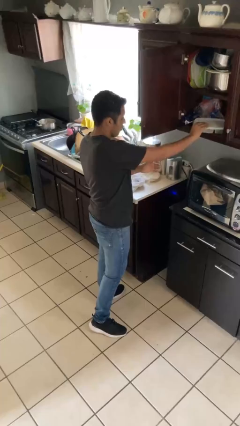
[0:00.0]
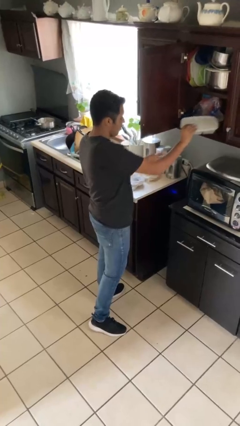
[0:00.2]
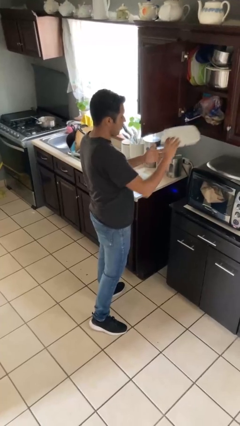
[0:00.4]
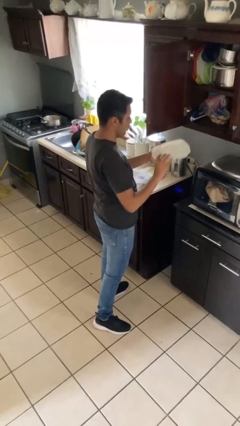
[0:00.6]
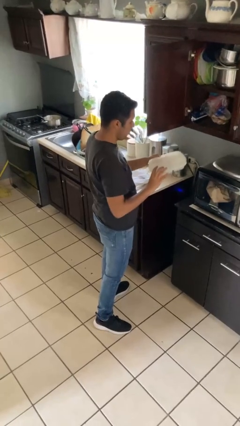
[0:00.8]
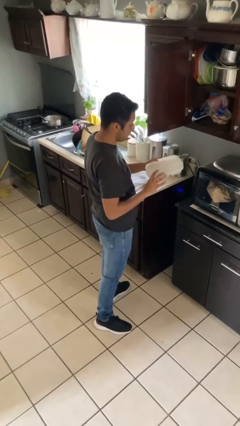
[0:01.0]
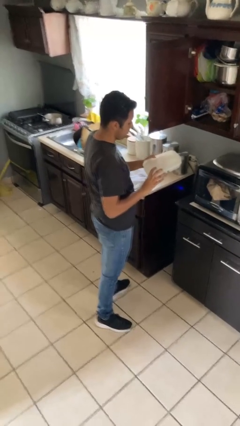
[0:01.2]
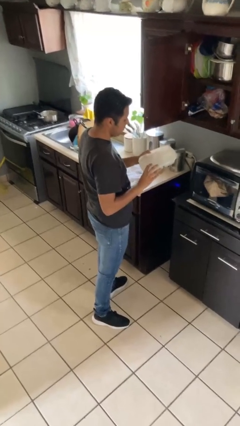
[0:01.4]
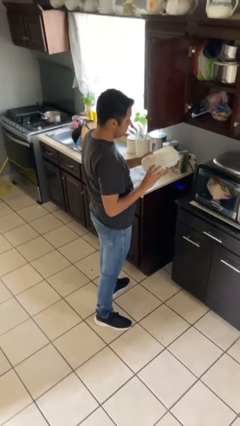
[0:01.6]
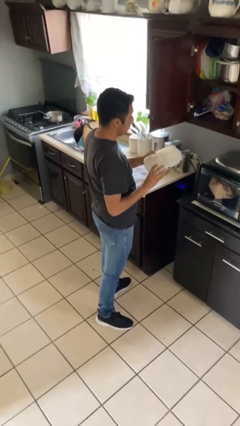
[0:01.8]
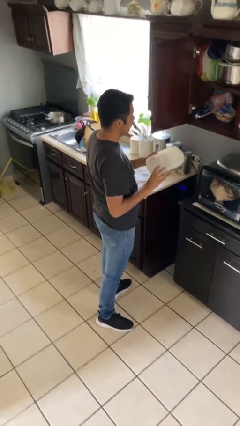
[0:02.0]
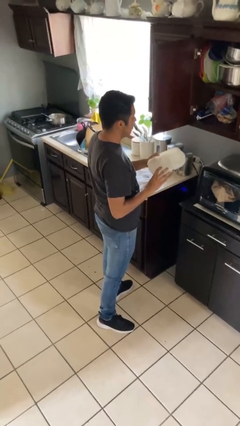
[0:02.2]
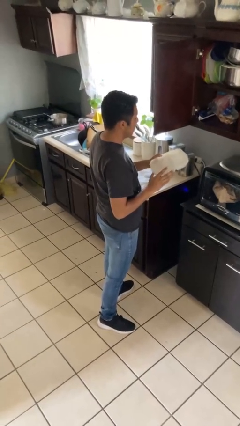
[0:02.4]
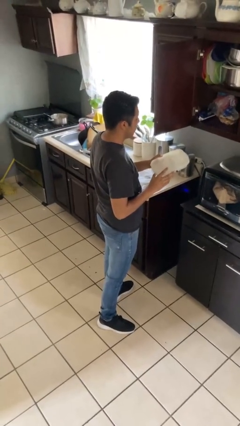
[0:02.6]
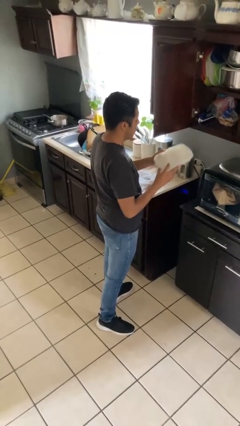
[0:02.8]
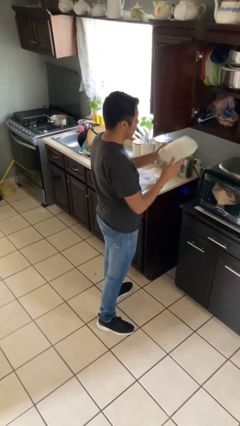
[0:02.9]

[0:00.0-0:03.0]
person picks up object from cabinet

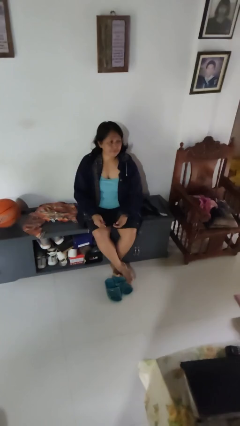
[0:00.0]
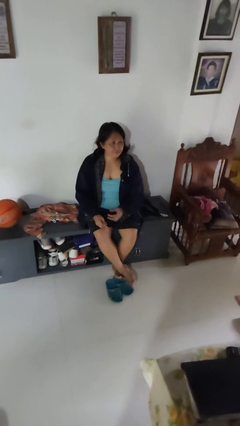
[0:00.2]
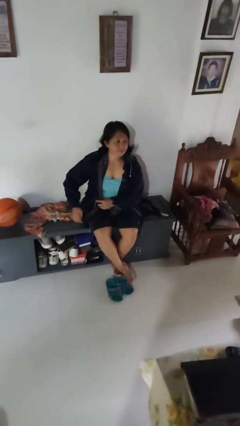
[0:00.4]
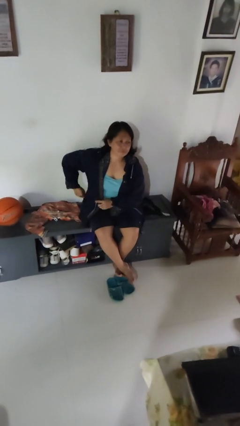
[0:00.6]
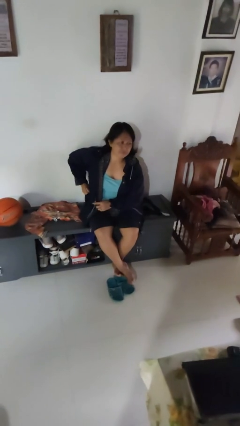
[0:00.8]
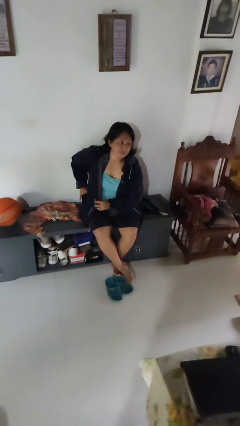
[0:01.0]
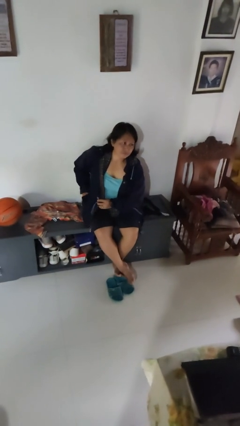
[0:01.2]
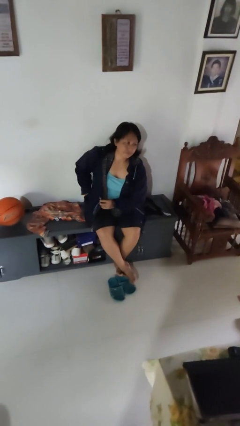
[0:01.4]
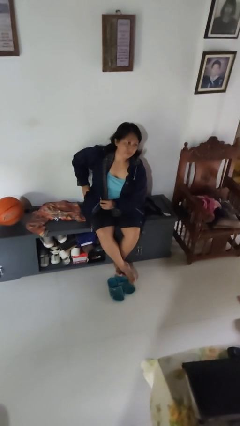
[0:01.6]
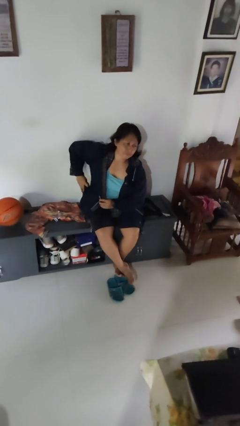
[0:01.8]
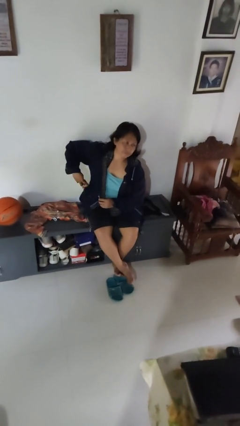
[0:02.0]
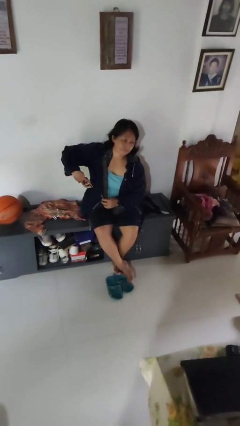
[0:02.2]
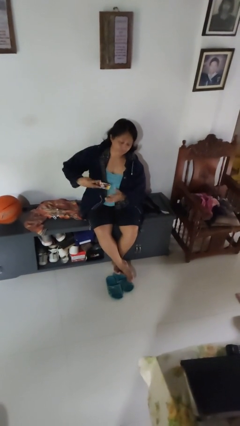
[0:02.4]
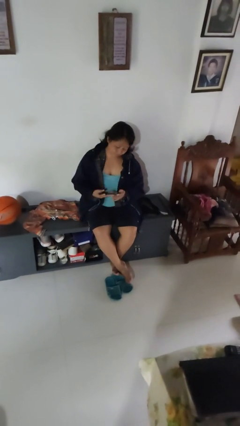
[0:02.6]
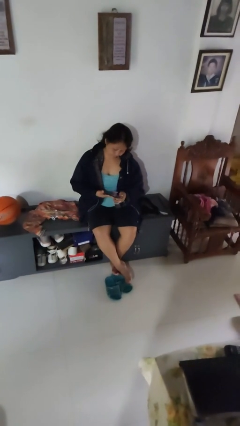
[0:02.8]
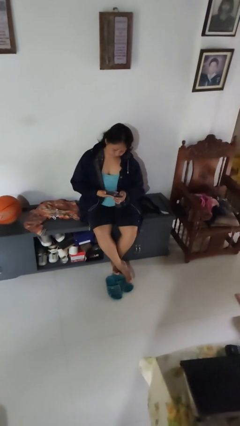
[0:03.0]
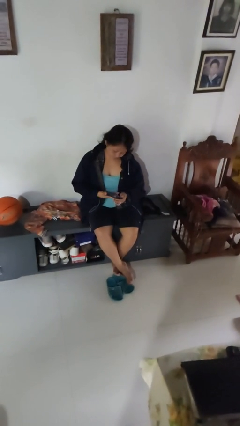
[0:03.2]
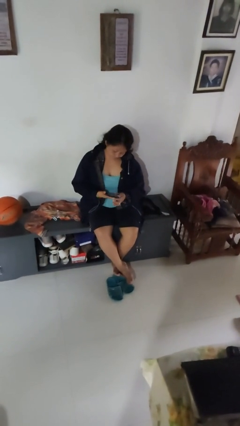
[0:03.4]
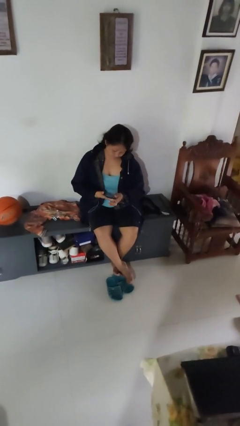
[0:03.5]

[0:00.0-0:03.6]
person takes phone from pocket

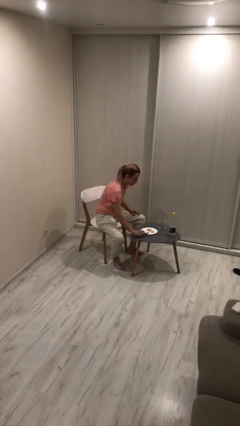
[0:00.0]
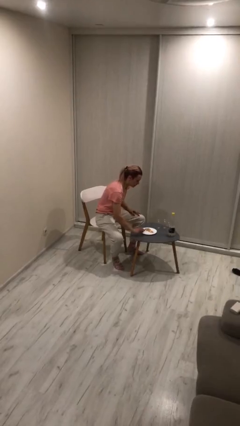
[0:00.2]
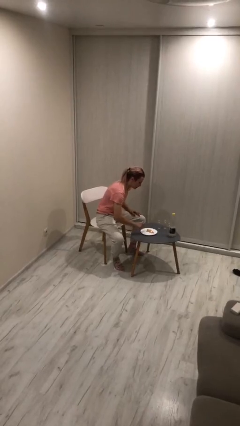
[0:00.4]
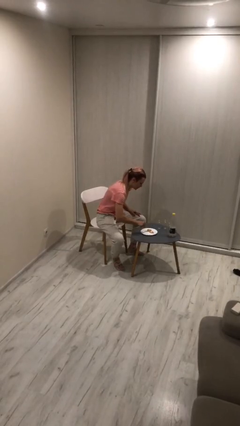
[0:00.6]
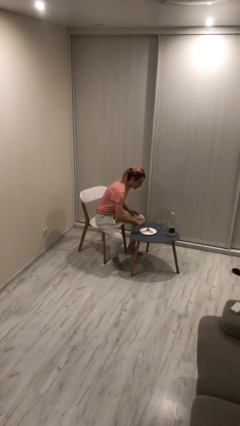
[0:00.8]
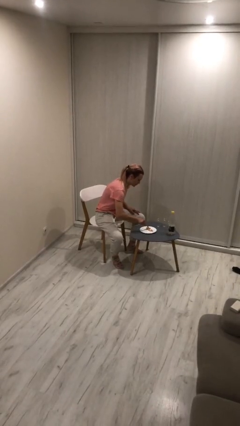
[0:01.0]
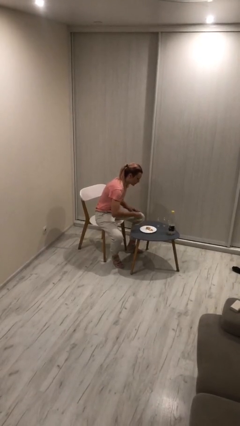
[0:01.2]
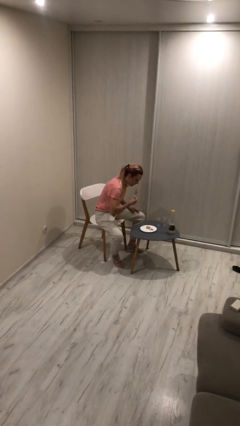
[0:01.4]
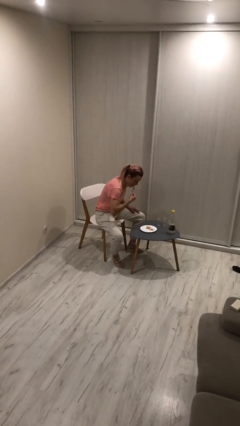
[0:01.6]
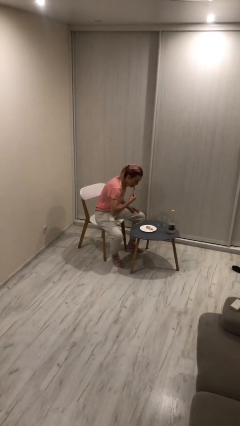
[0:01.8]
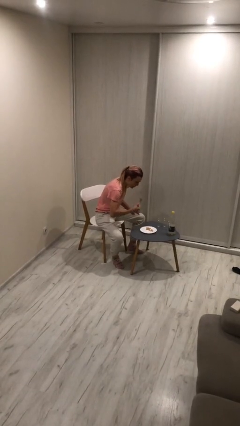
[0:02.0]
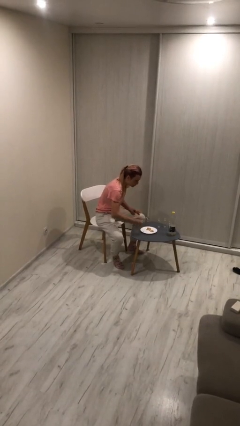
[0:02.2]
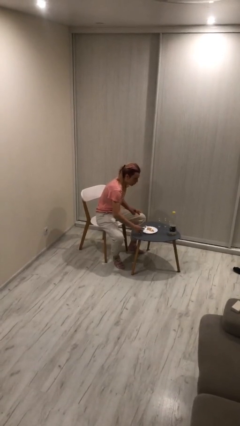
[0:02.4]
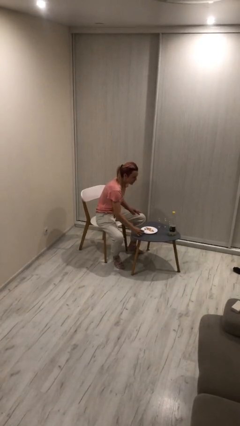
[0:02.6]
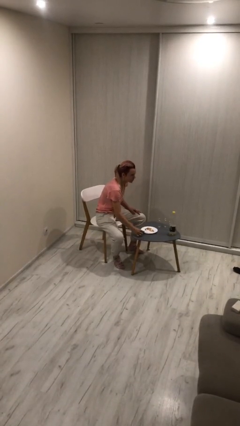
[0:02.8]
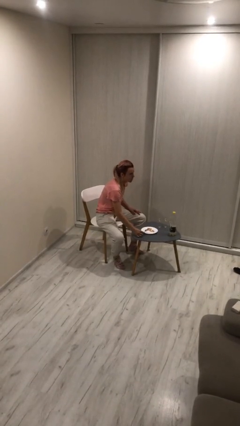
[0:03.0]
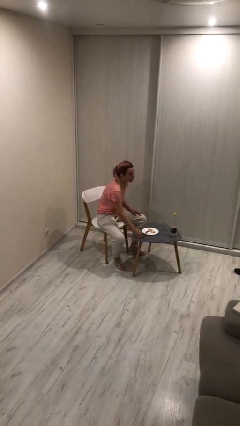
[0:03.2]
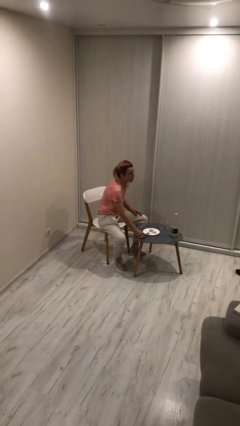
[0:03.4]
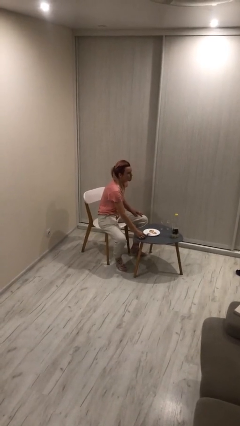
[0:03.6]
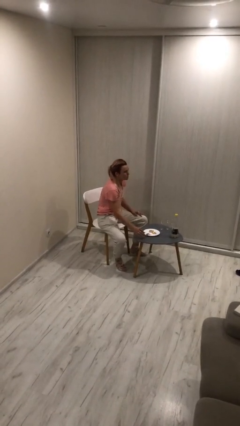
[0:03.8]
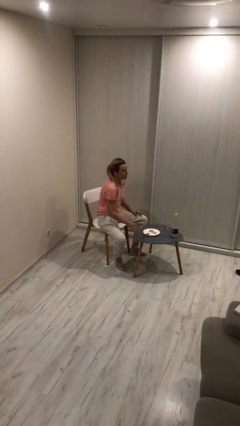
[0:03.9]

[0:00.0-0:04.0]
person eats with utensil

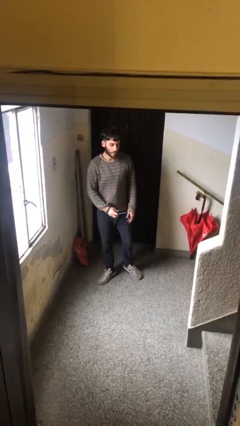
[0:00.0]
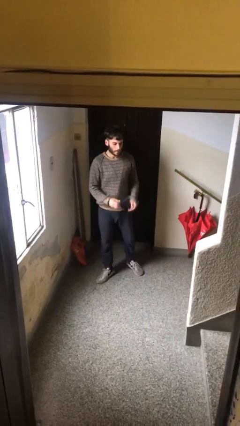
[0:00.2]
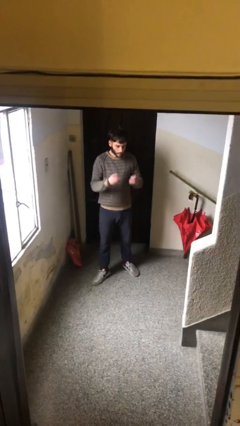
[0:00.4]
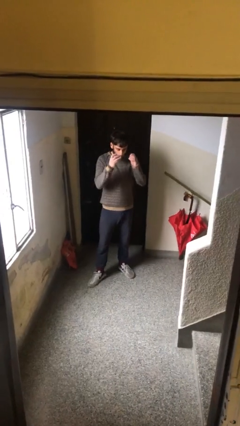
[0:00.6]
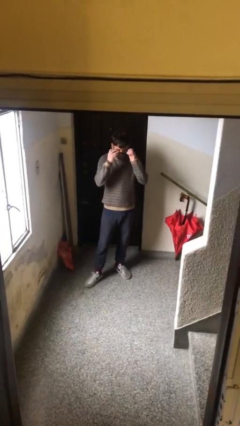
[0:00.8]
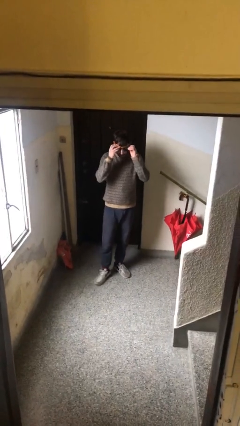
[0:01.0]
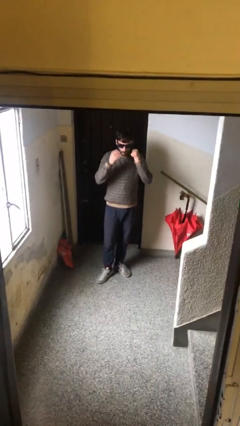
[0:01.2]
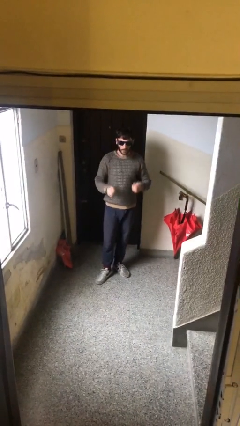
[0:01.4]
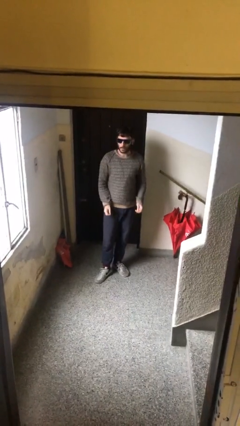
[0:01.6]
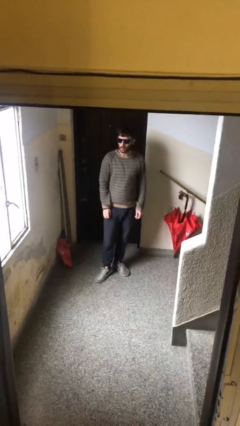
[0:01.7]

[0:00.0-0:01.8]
person puts on sunglasses

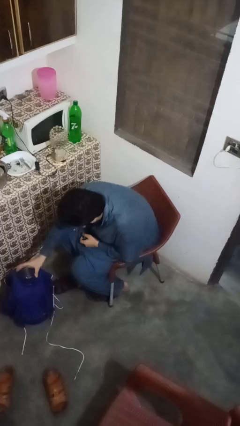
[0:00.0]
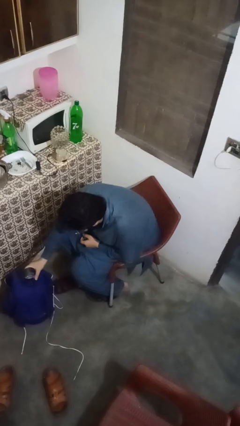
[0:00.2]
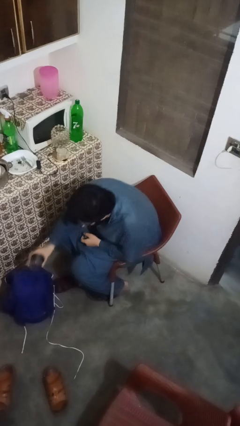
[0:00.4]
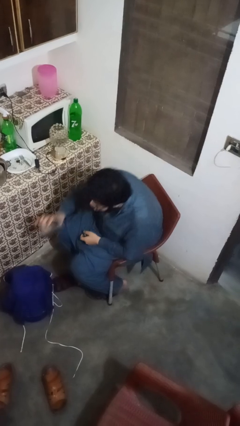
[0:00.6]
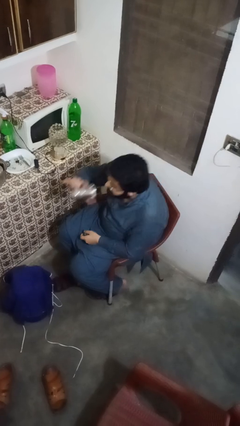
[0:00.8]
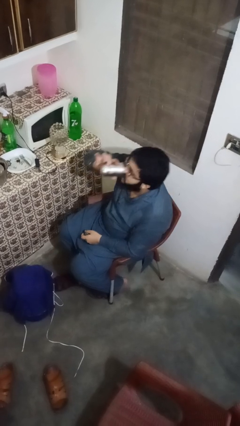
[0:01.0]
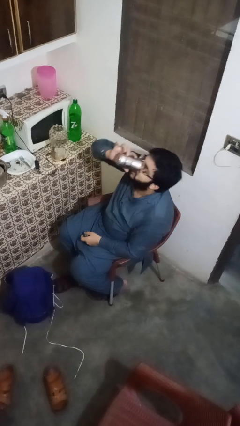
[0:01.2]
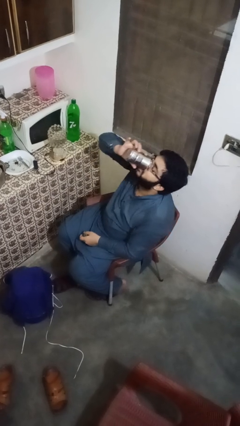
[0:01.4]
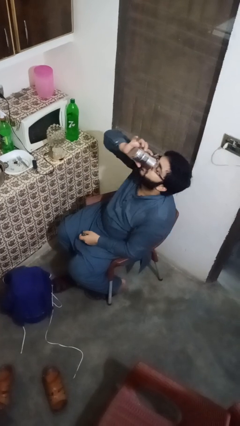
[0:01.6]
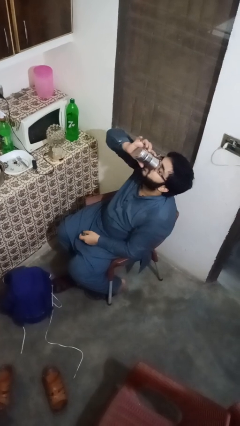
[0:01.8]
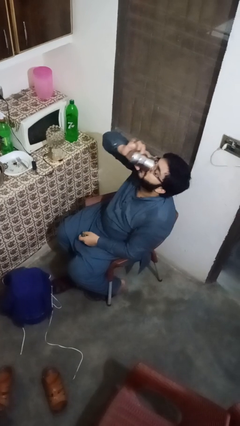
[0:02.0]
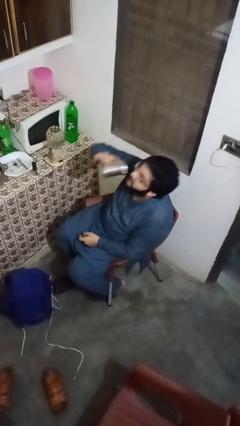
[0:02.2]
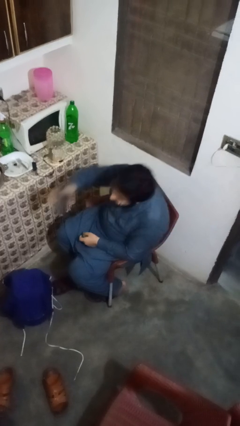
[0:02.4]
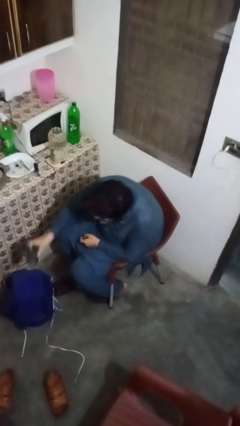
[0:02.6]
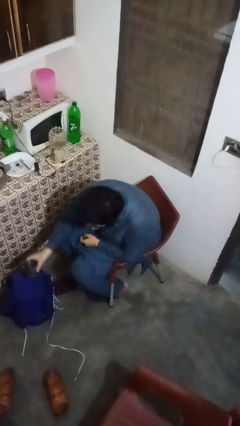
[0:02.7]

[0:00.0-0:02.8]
person drinks from cup

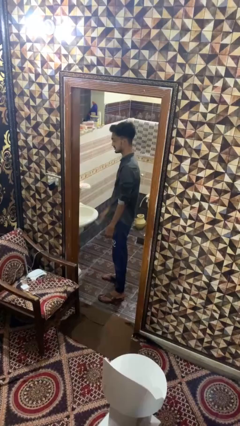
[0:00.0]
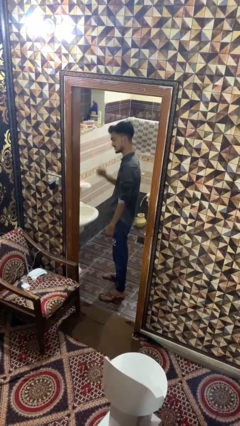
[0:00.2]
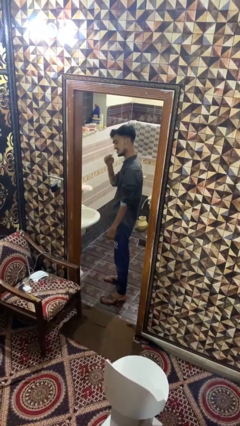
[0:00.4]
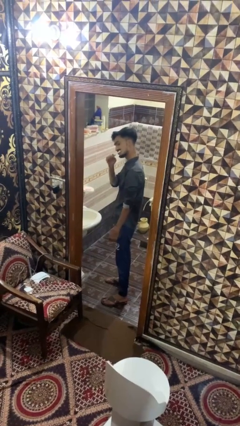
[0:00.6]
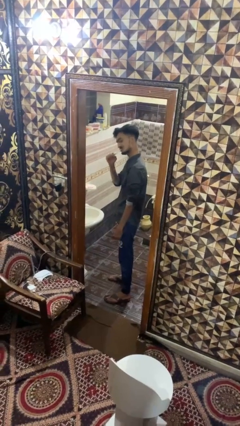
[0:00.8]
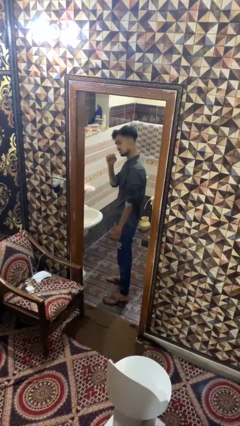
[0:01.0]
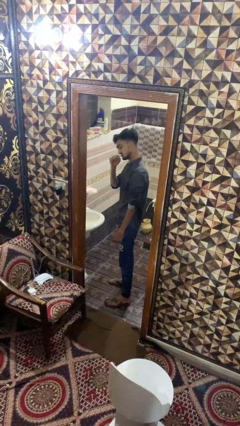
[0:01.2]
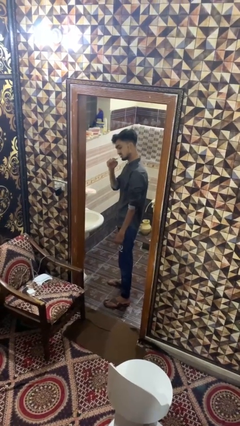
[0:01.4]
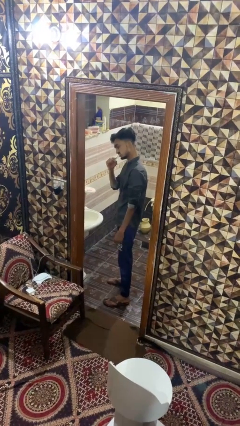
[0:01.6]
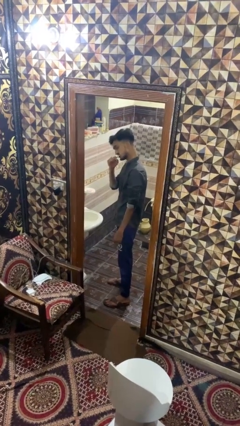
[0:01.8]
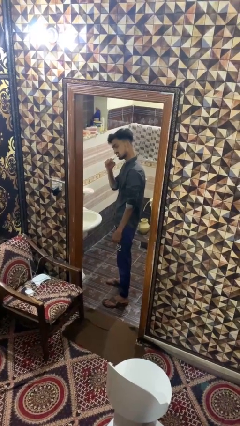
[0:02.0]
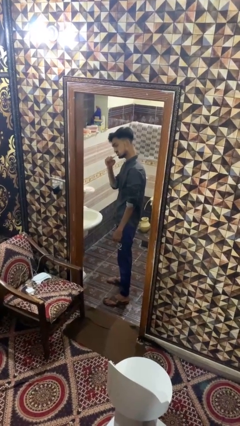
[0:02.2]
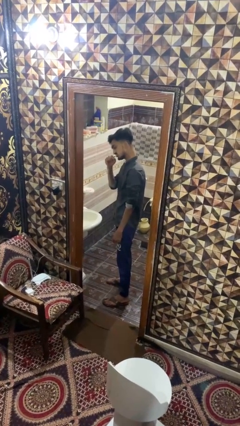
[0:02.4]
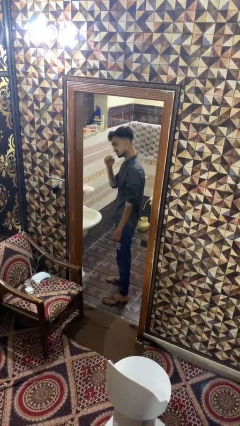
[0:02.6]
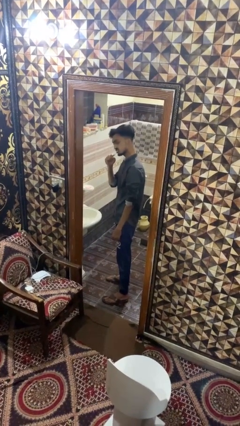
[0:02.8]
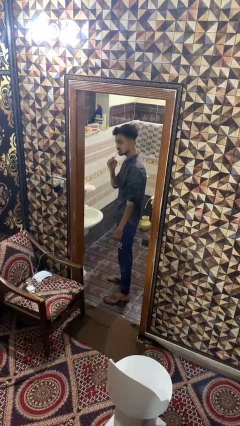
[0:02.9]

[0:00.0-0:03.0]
person brushes teeth
